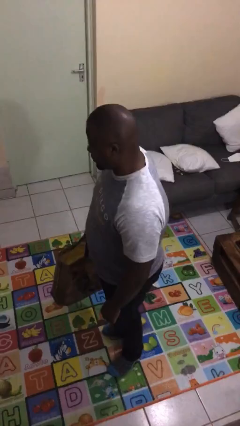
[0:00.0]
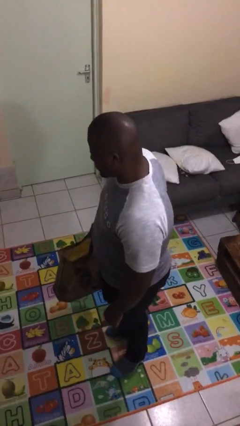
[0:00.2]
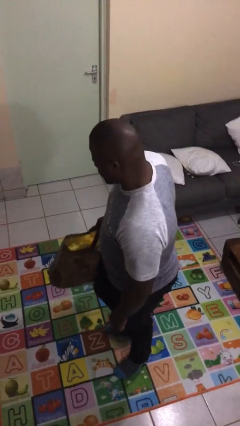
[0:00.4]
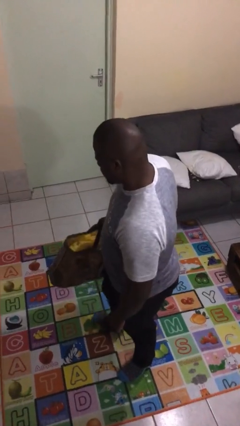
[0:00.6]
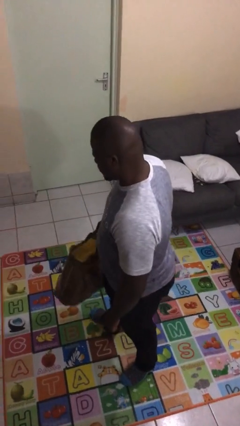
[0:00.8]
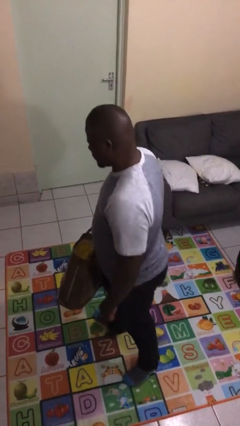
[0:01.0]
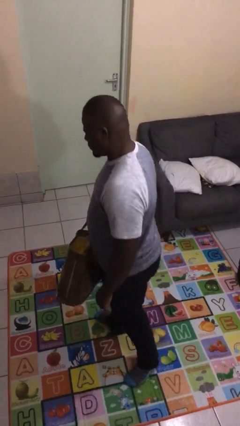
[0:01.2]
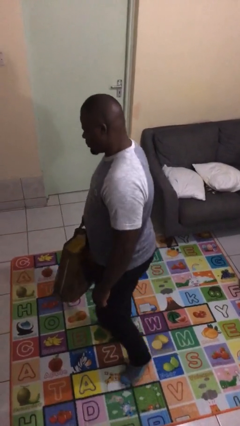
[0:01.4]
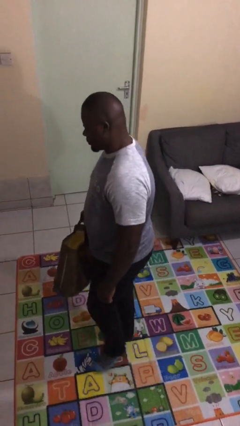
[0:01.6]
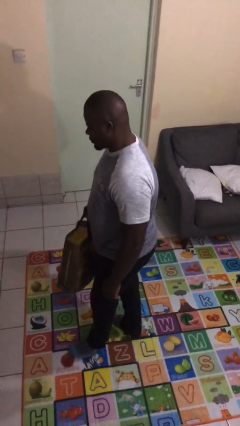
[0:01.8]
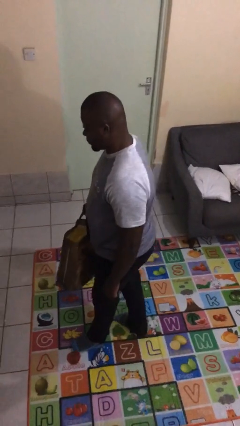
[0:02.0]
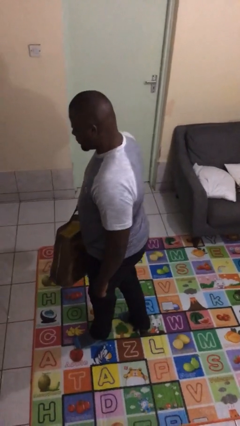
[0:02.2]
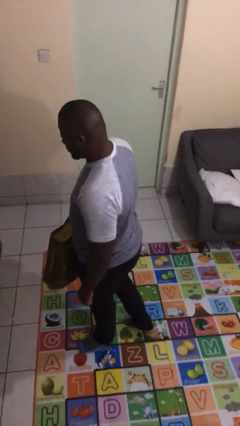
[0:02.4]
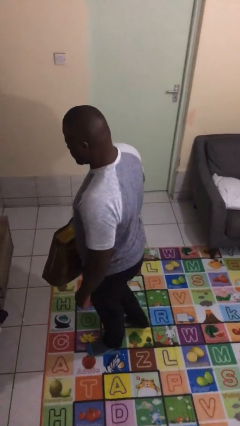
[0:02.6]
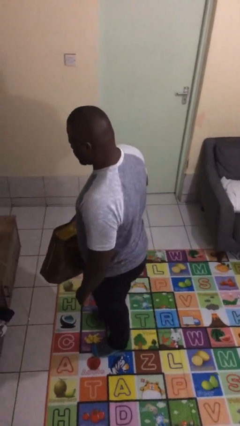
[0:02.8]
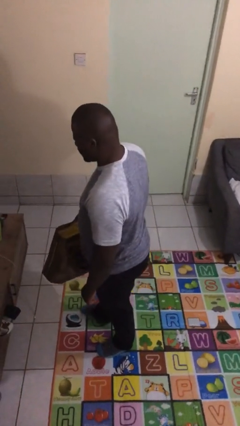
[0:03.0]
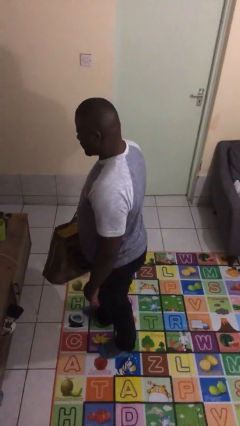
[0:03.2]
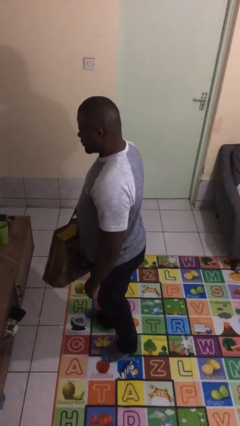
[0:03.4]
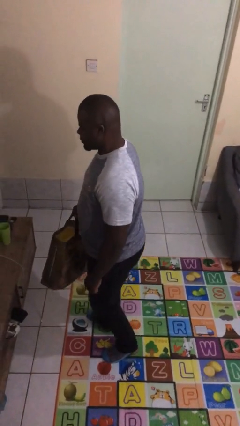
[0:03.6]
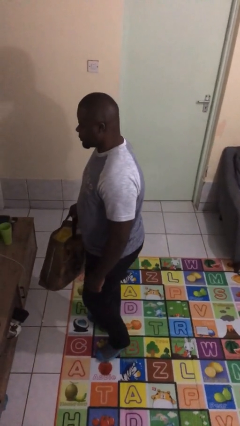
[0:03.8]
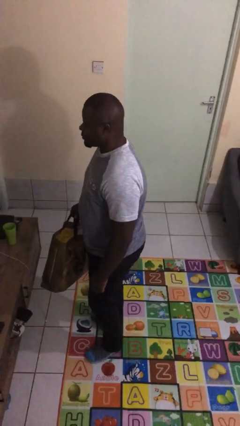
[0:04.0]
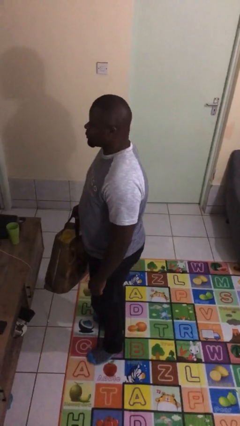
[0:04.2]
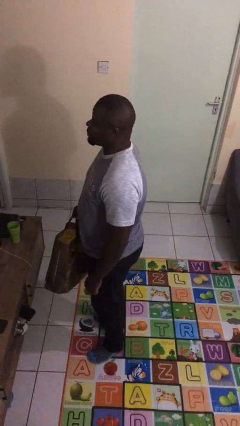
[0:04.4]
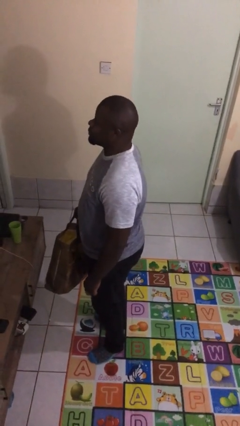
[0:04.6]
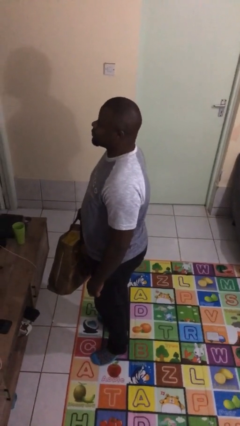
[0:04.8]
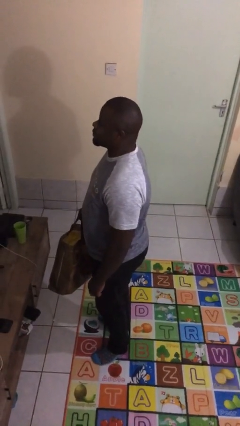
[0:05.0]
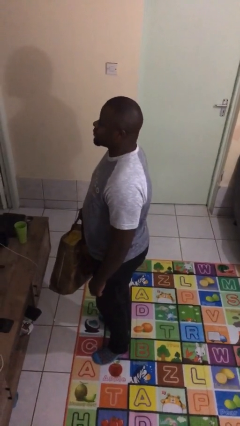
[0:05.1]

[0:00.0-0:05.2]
person carries groceries

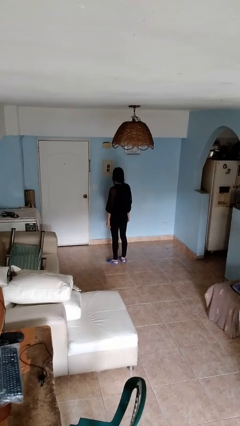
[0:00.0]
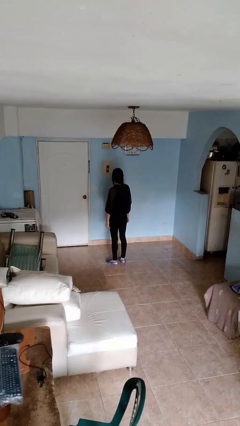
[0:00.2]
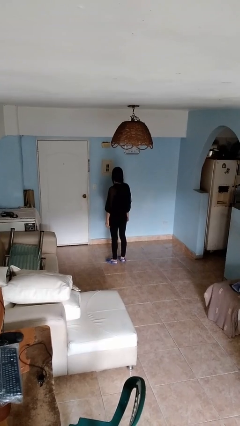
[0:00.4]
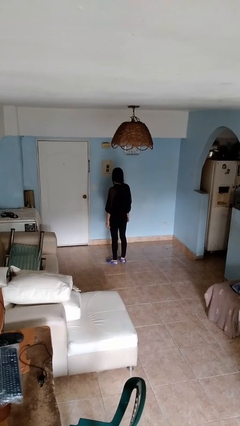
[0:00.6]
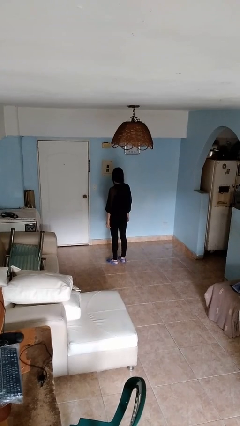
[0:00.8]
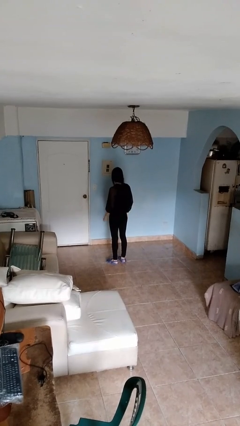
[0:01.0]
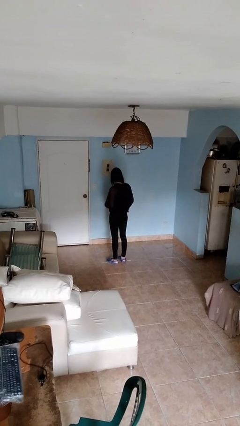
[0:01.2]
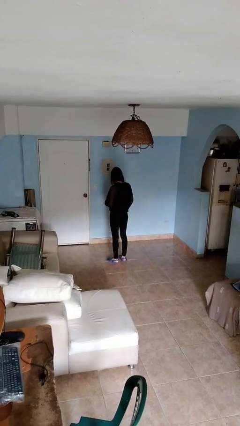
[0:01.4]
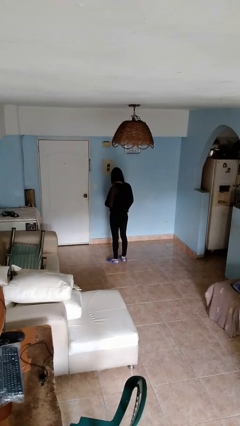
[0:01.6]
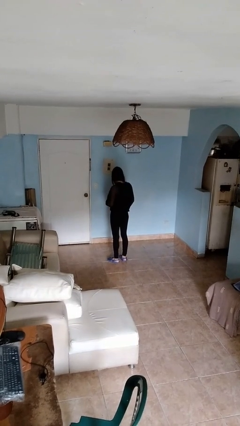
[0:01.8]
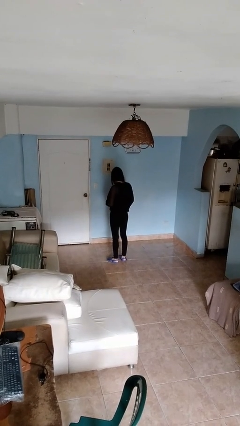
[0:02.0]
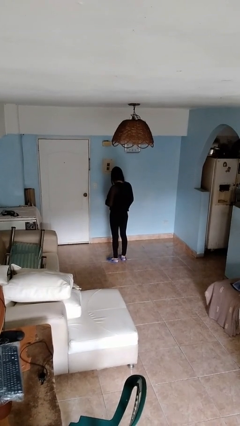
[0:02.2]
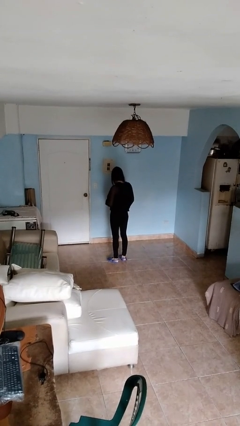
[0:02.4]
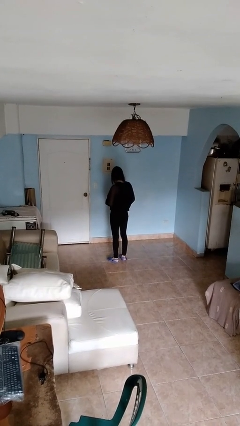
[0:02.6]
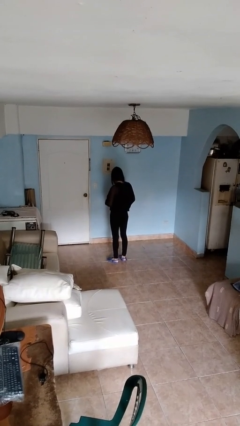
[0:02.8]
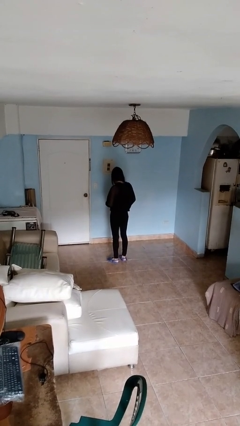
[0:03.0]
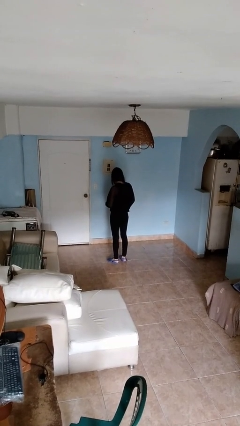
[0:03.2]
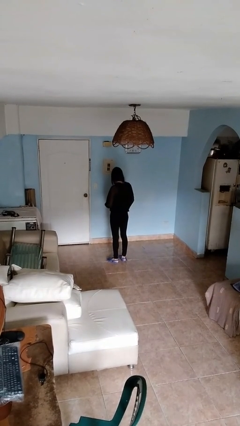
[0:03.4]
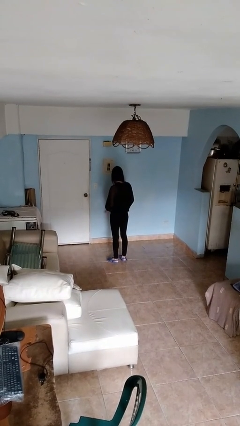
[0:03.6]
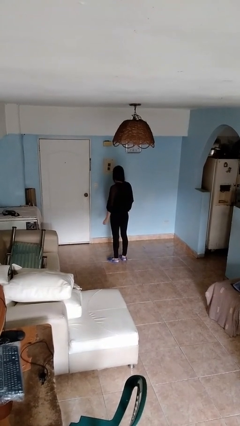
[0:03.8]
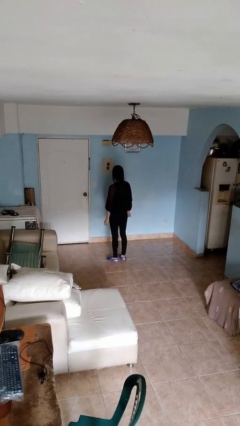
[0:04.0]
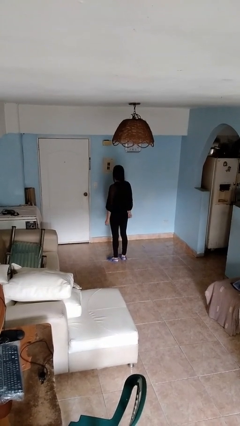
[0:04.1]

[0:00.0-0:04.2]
person buttons shirt

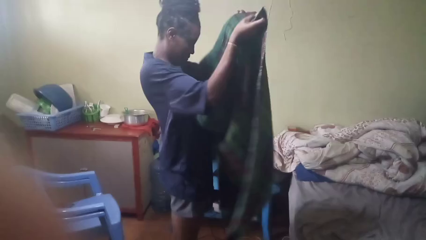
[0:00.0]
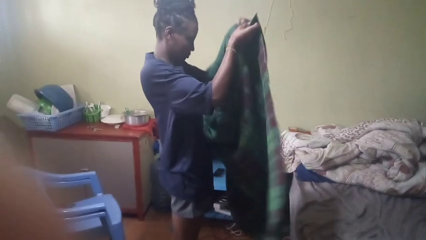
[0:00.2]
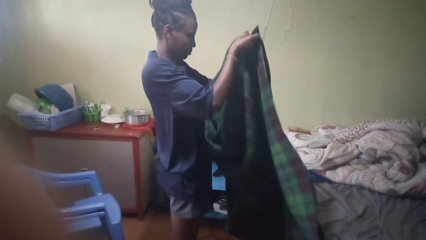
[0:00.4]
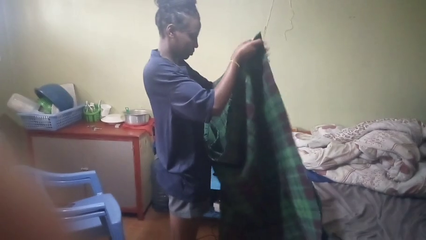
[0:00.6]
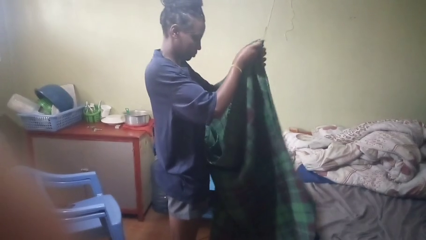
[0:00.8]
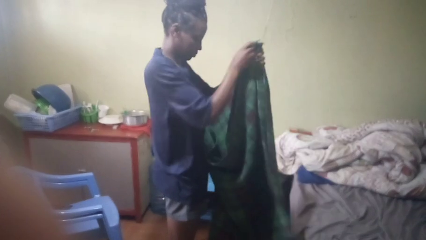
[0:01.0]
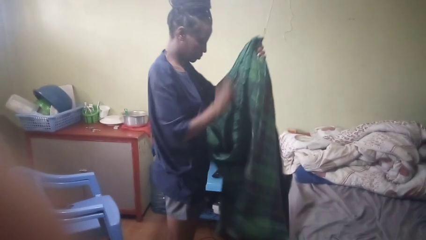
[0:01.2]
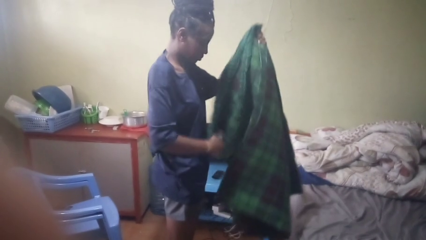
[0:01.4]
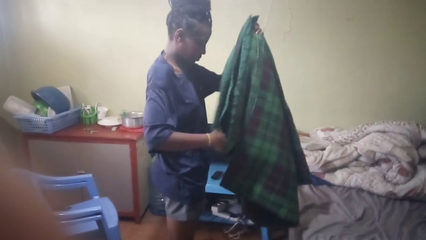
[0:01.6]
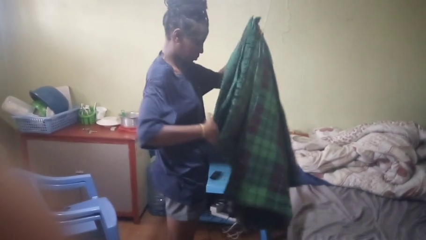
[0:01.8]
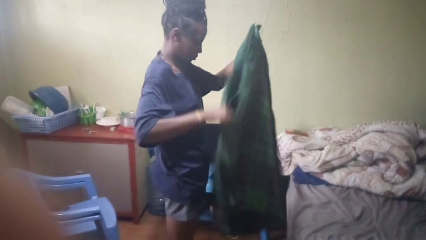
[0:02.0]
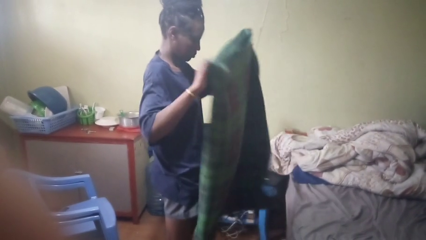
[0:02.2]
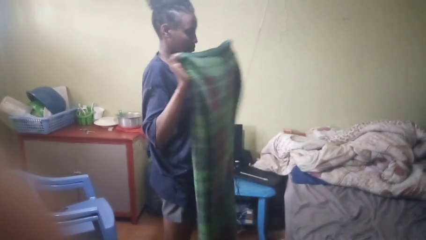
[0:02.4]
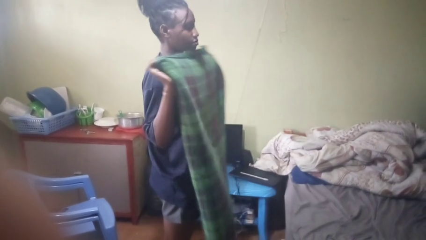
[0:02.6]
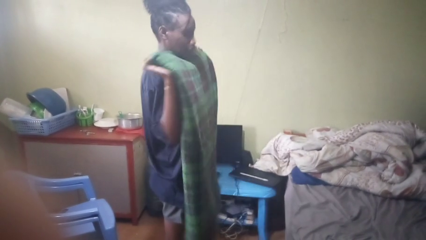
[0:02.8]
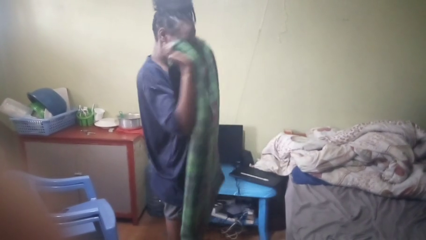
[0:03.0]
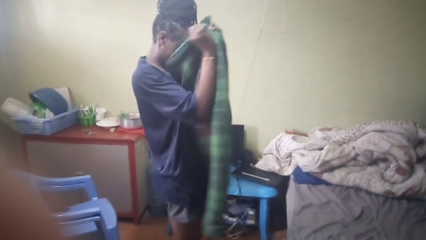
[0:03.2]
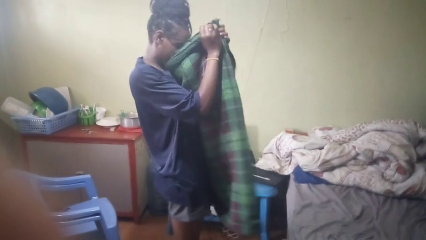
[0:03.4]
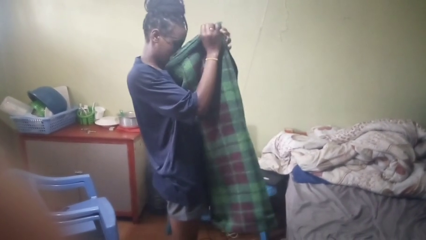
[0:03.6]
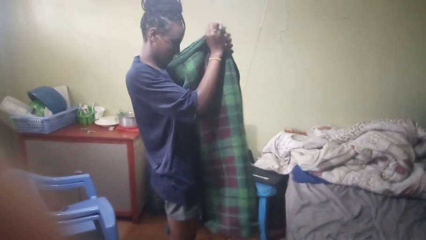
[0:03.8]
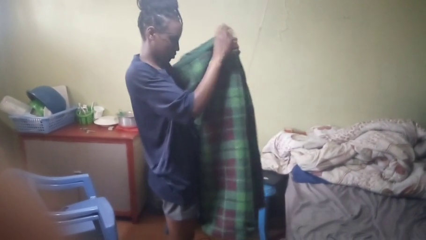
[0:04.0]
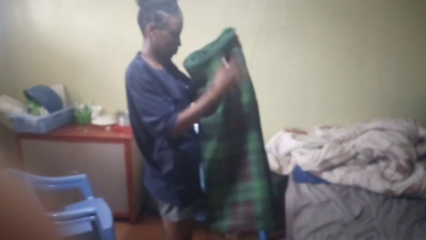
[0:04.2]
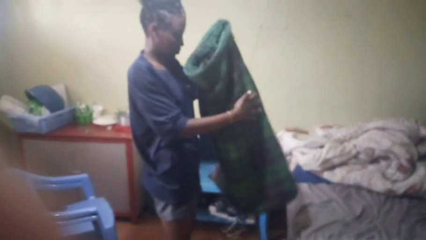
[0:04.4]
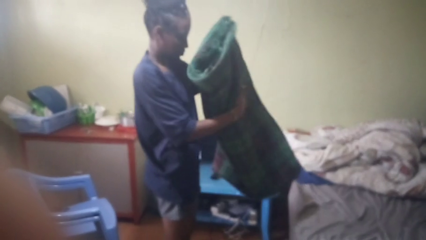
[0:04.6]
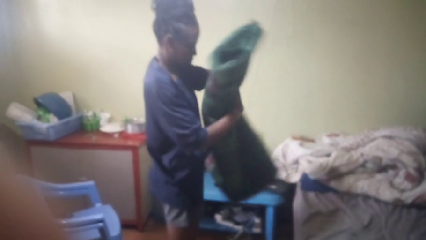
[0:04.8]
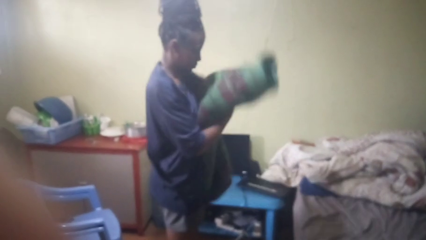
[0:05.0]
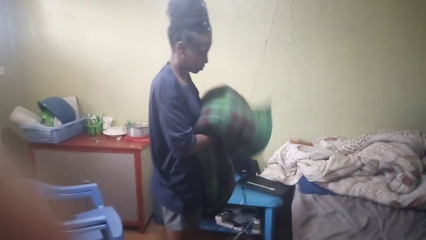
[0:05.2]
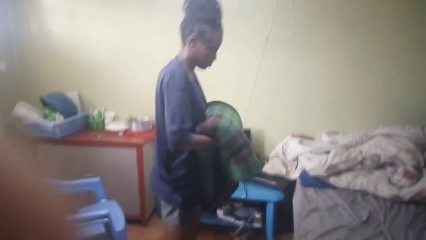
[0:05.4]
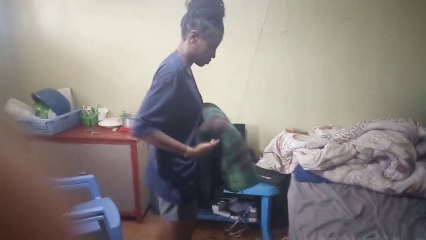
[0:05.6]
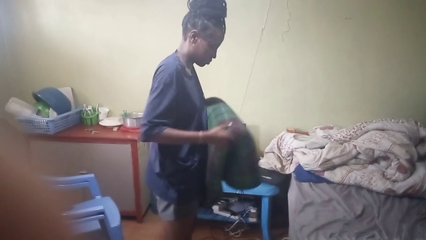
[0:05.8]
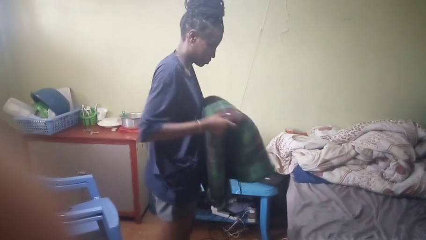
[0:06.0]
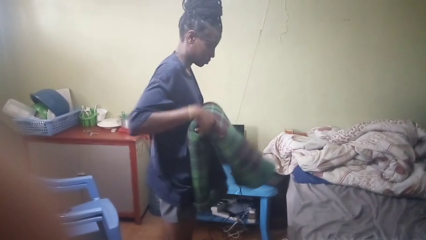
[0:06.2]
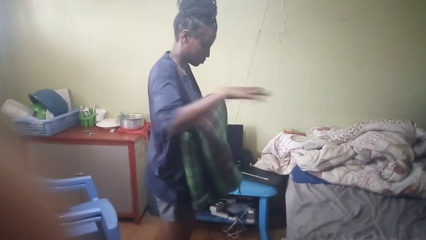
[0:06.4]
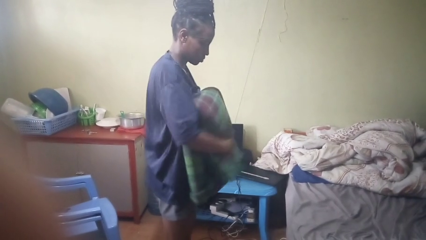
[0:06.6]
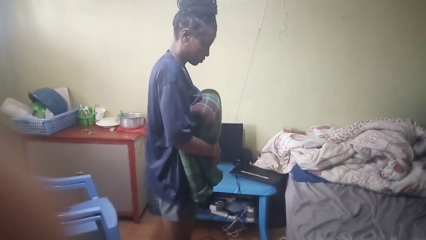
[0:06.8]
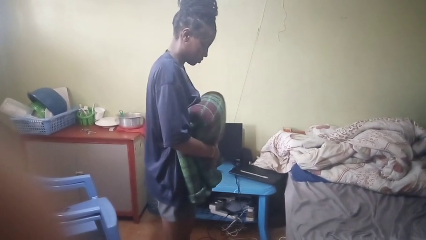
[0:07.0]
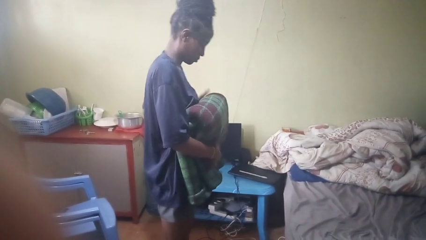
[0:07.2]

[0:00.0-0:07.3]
person folds blanket

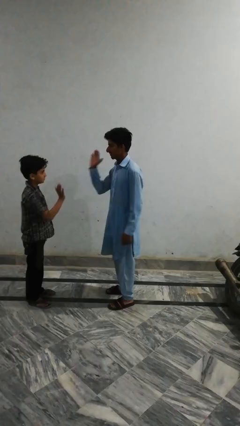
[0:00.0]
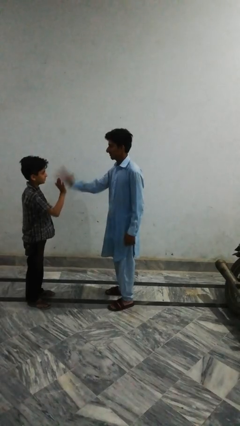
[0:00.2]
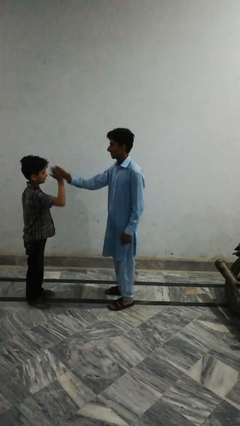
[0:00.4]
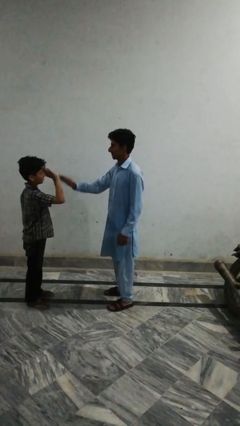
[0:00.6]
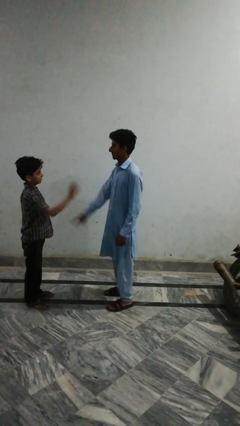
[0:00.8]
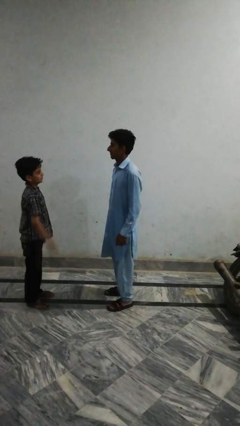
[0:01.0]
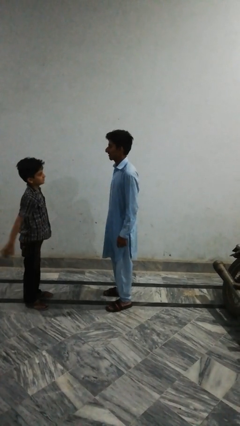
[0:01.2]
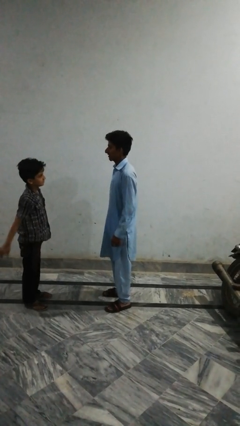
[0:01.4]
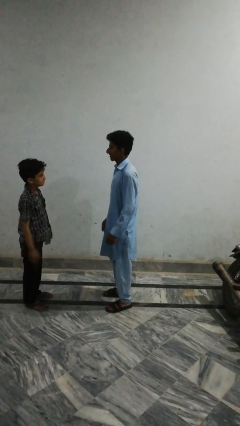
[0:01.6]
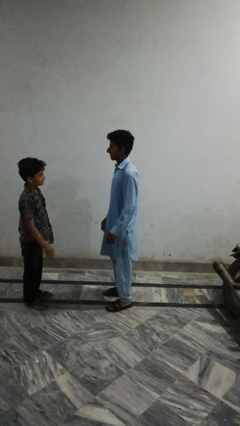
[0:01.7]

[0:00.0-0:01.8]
person highfives hand
